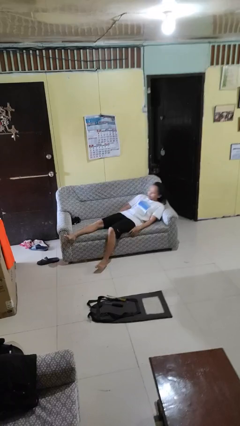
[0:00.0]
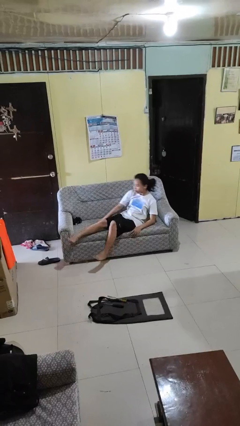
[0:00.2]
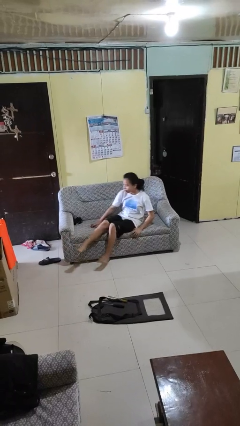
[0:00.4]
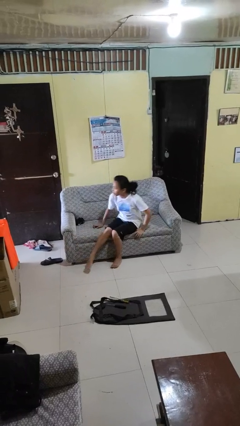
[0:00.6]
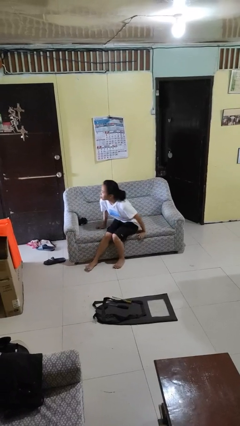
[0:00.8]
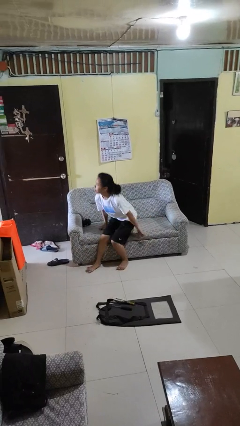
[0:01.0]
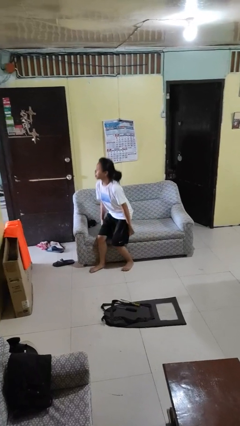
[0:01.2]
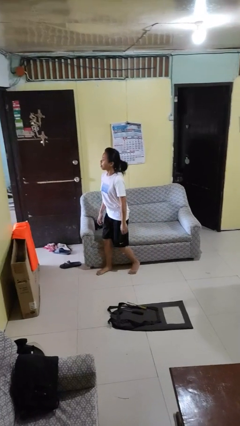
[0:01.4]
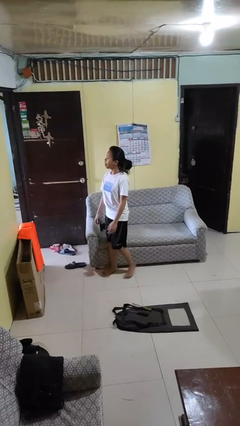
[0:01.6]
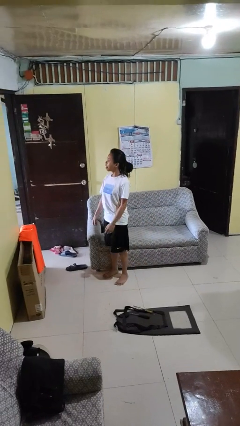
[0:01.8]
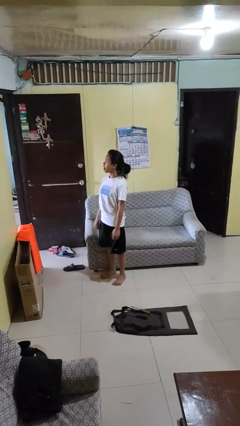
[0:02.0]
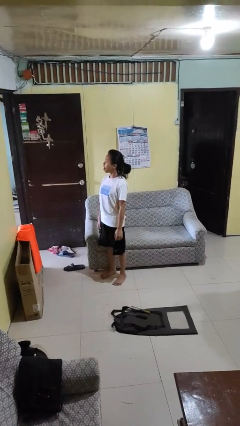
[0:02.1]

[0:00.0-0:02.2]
person stands up

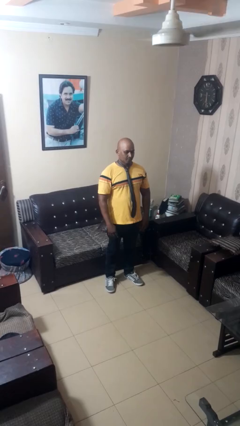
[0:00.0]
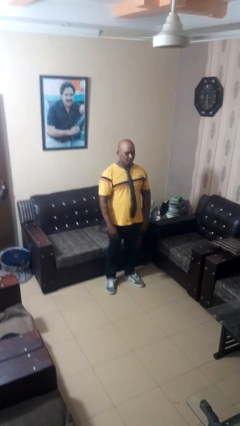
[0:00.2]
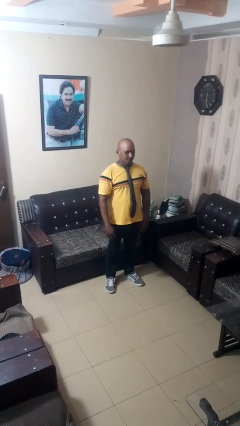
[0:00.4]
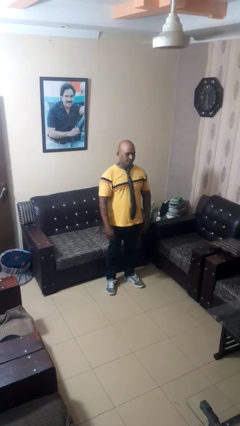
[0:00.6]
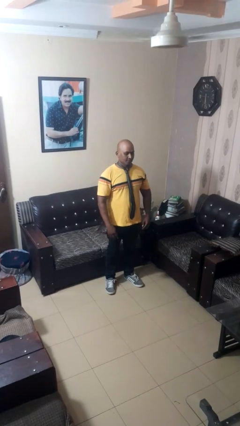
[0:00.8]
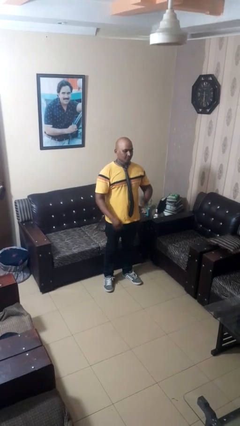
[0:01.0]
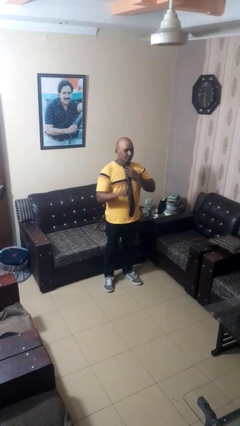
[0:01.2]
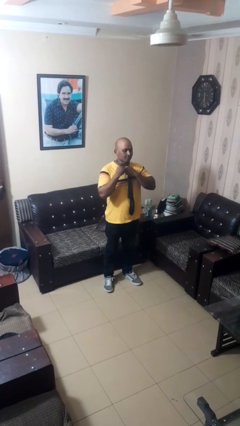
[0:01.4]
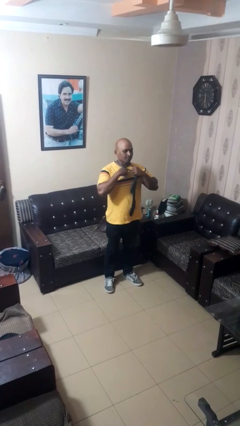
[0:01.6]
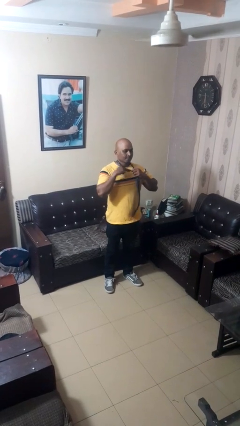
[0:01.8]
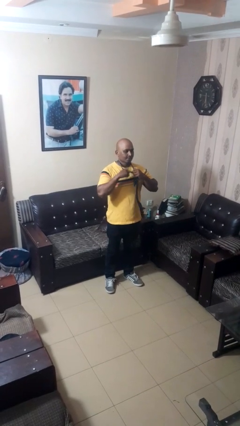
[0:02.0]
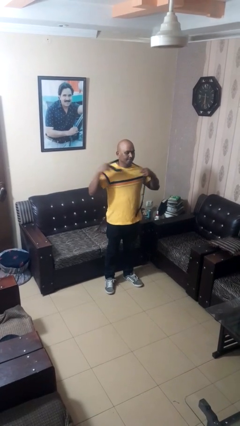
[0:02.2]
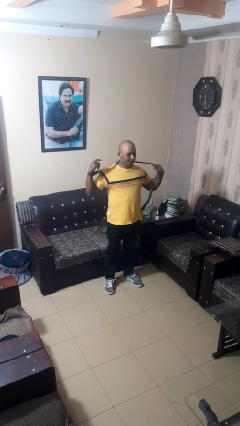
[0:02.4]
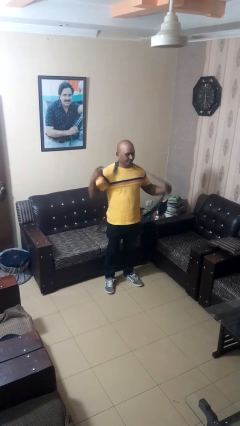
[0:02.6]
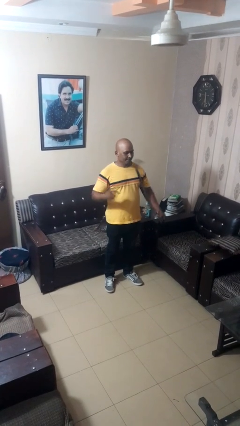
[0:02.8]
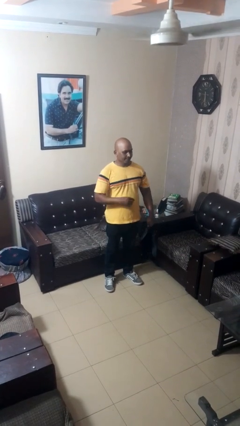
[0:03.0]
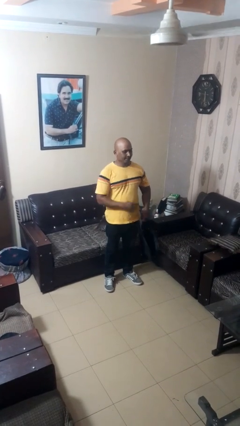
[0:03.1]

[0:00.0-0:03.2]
person takes off necktie

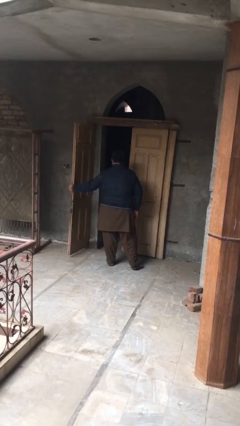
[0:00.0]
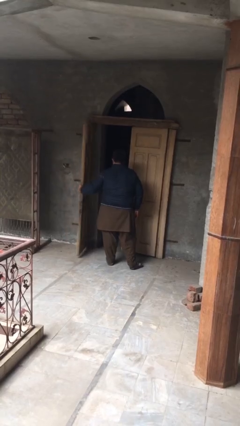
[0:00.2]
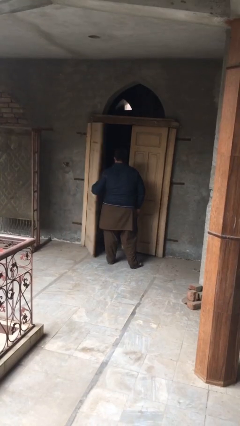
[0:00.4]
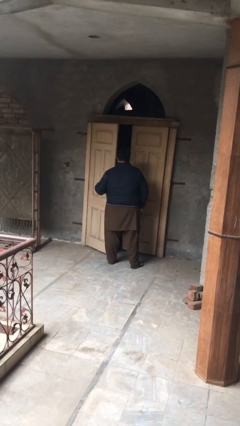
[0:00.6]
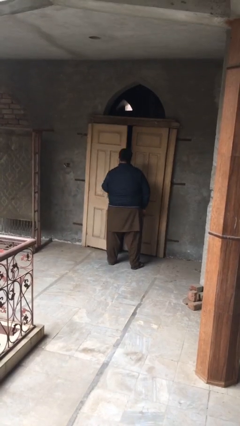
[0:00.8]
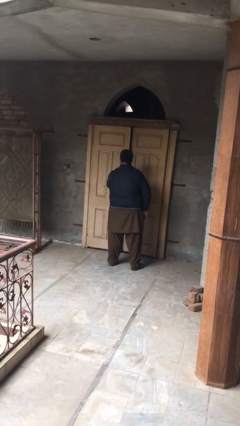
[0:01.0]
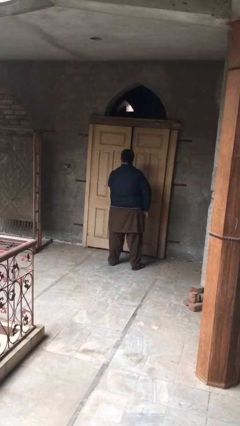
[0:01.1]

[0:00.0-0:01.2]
person closes facility door

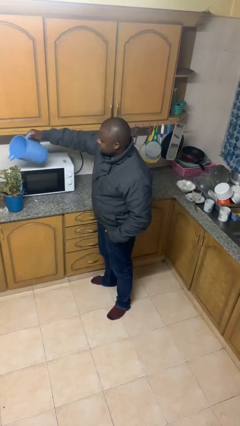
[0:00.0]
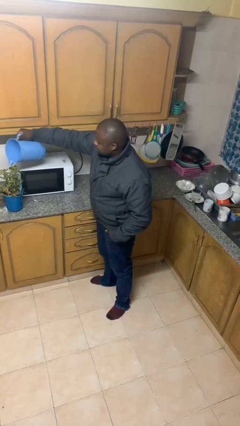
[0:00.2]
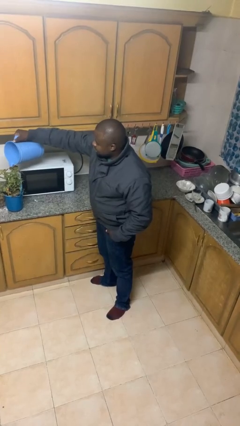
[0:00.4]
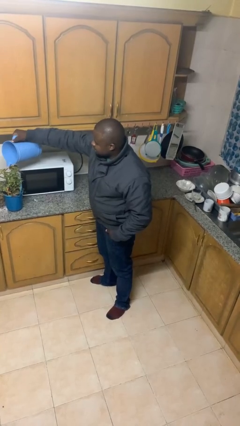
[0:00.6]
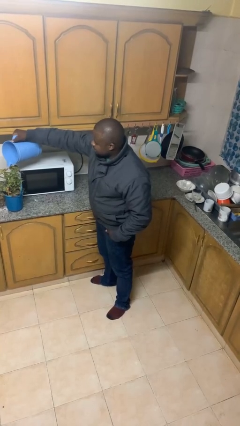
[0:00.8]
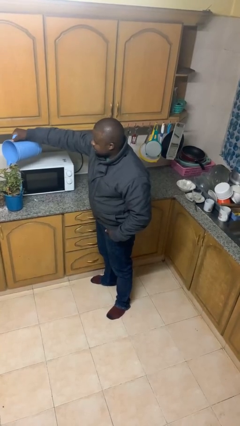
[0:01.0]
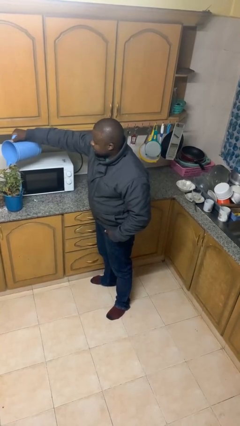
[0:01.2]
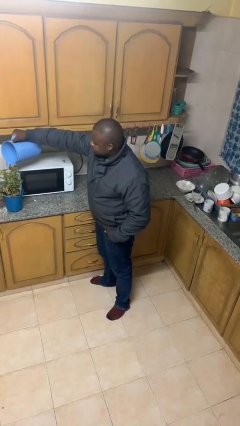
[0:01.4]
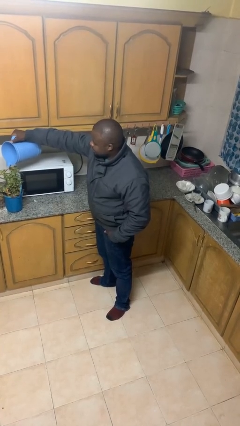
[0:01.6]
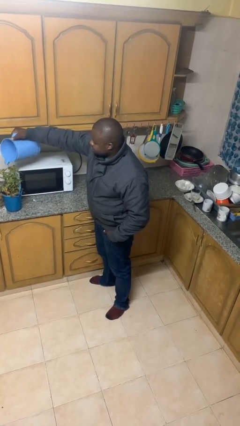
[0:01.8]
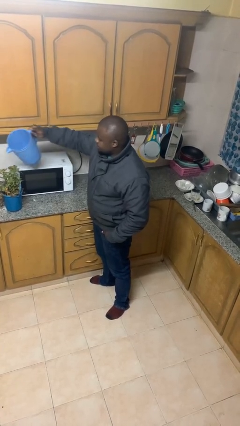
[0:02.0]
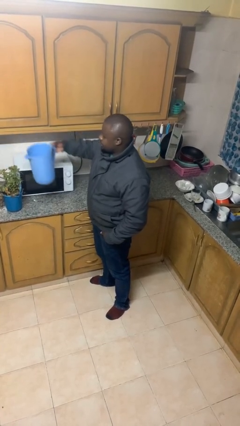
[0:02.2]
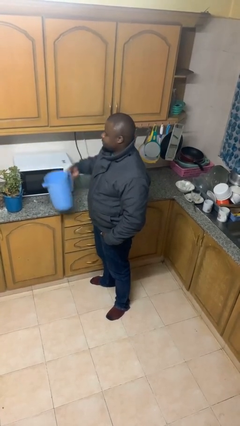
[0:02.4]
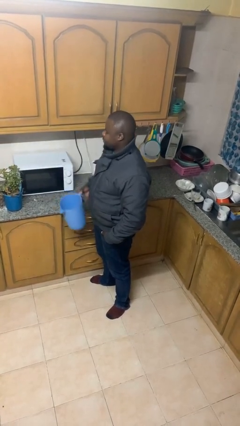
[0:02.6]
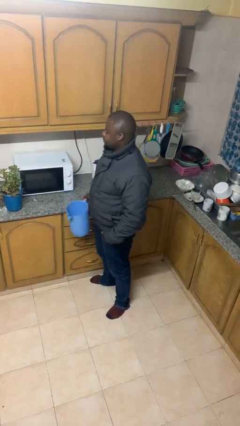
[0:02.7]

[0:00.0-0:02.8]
person waters houseplant

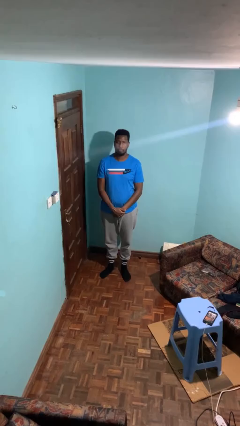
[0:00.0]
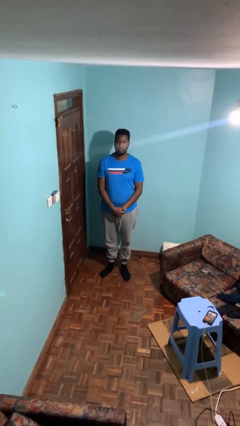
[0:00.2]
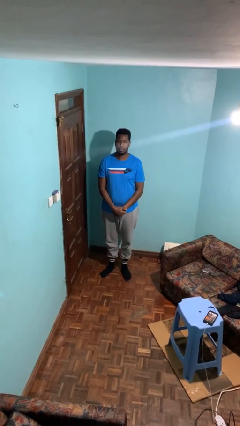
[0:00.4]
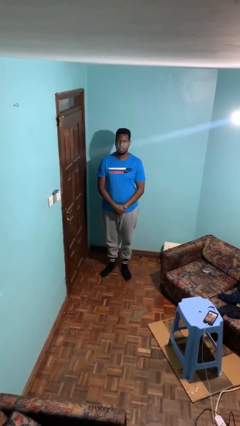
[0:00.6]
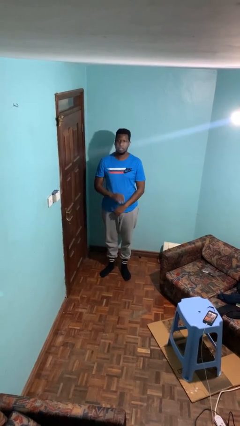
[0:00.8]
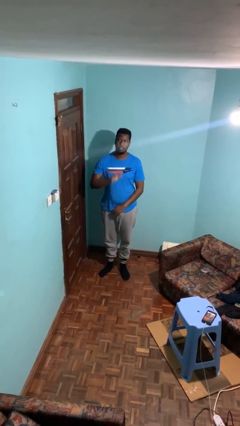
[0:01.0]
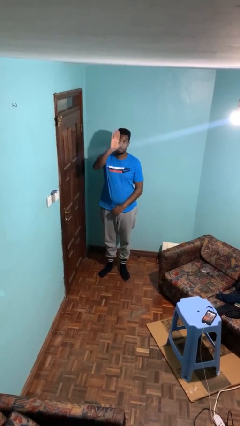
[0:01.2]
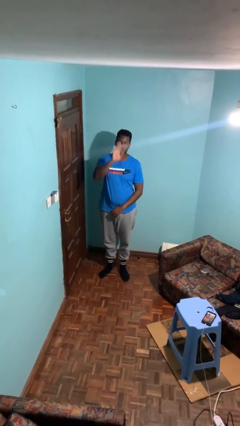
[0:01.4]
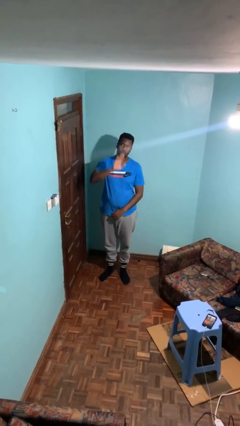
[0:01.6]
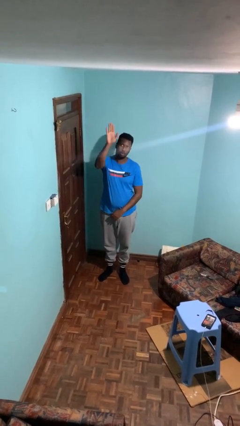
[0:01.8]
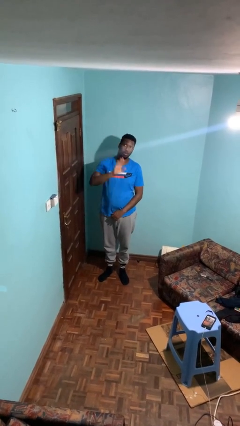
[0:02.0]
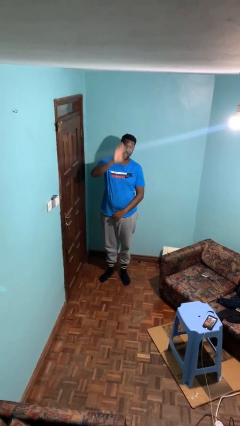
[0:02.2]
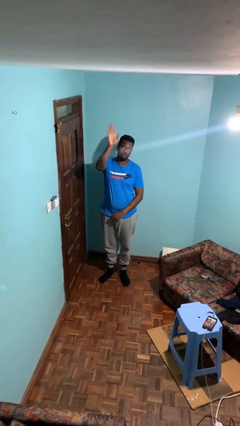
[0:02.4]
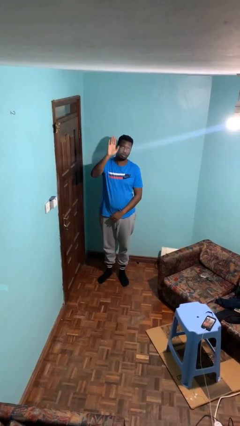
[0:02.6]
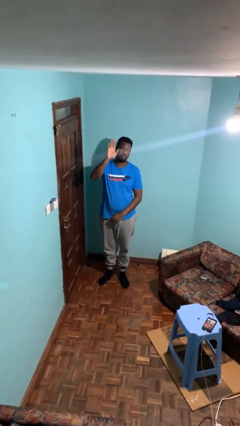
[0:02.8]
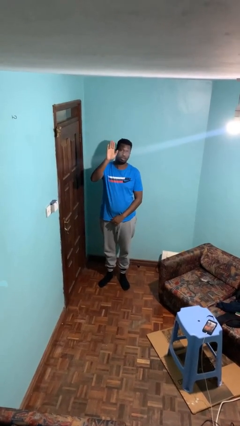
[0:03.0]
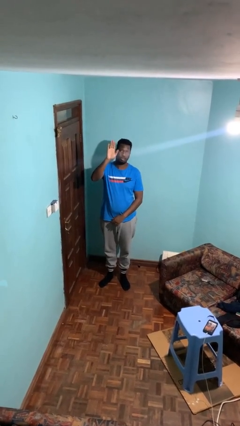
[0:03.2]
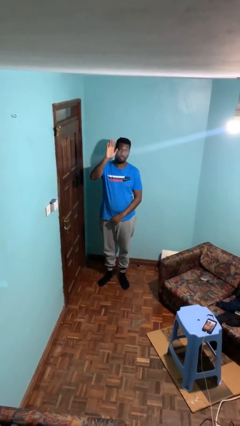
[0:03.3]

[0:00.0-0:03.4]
person gestures swipe up

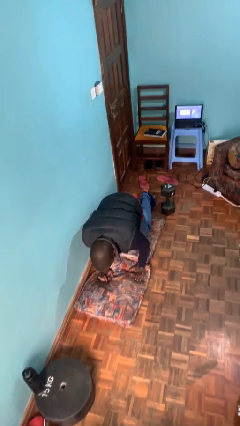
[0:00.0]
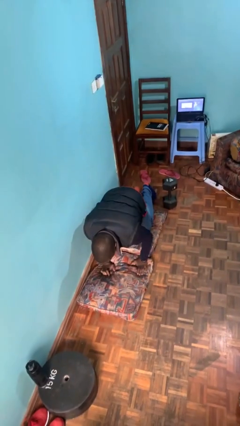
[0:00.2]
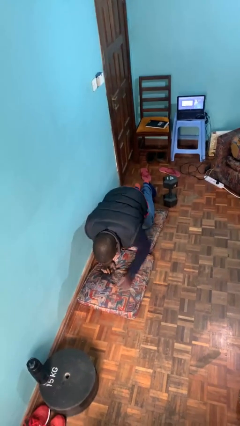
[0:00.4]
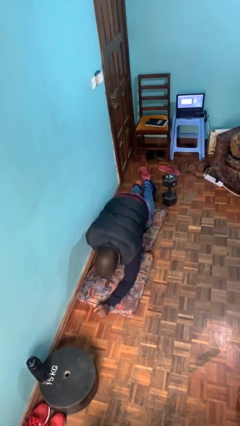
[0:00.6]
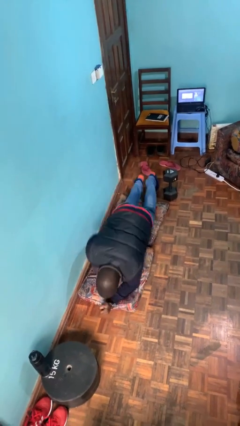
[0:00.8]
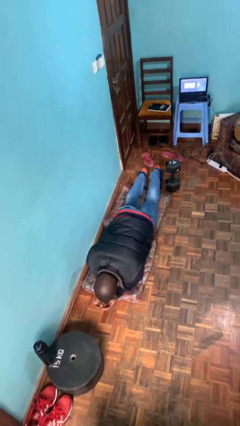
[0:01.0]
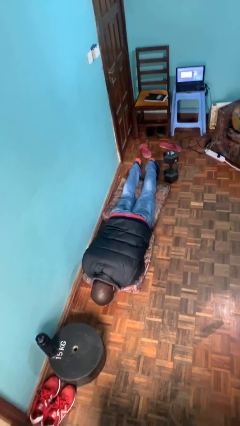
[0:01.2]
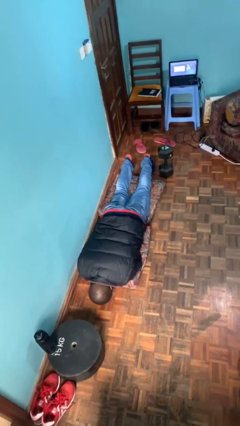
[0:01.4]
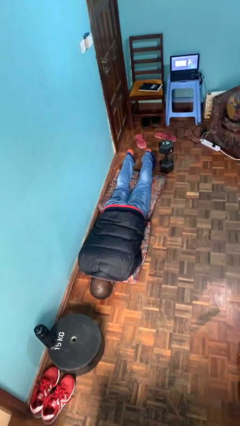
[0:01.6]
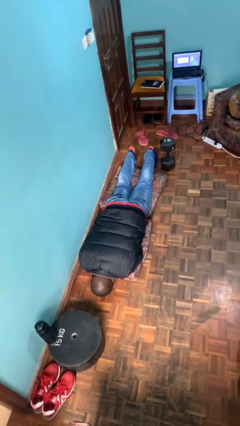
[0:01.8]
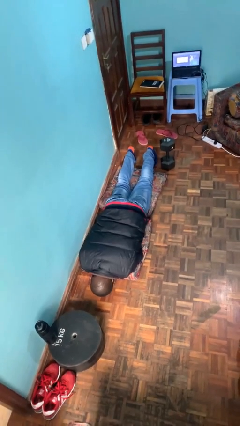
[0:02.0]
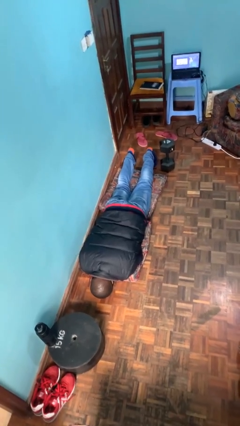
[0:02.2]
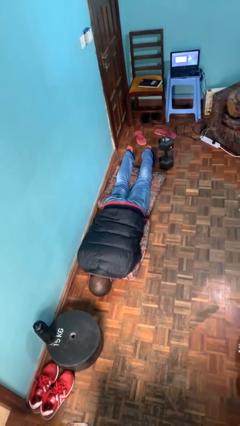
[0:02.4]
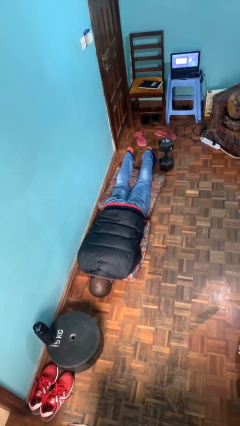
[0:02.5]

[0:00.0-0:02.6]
person lies down on floor

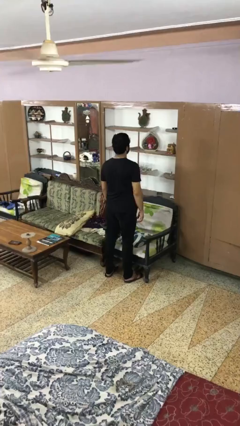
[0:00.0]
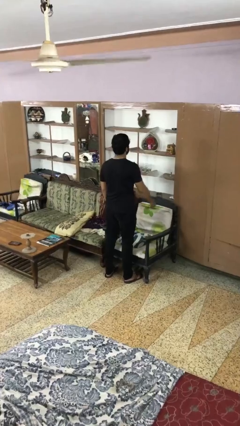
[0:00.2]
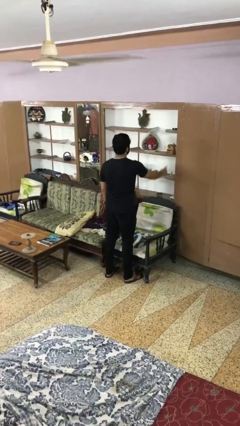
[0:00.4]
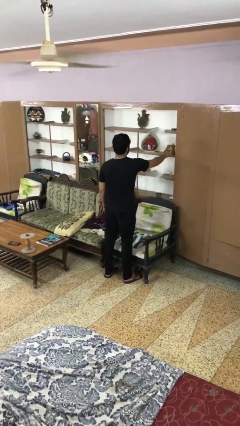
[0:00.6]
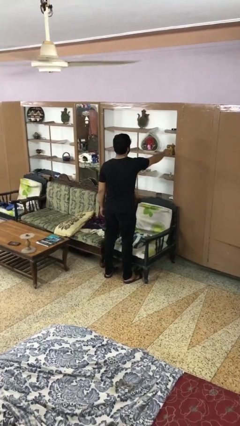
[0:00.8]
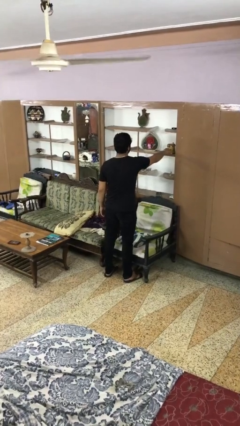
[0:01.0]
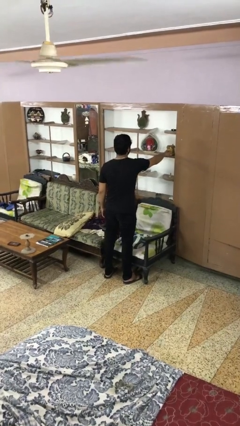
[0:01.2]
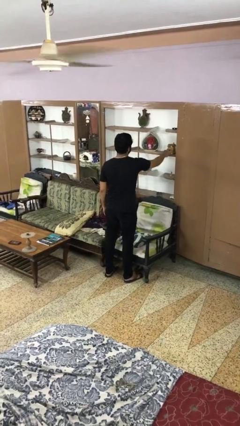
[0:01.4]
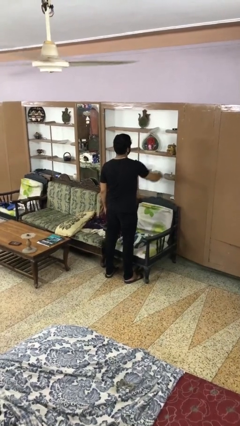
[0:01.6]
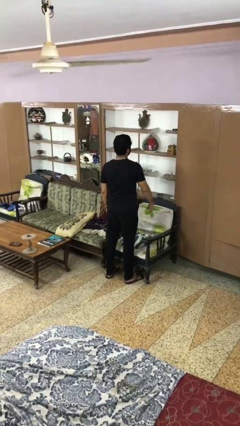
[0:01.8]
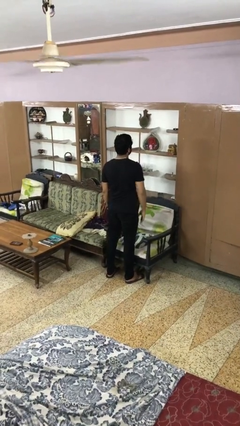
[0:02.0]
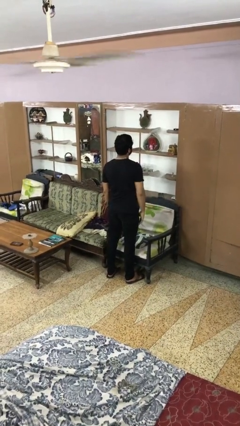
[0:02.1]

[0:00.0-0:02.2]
person taps object with finger
